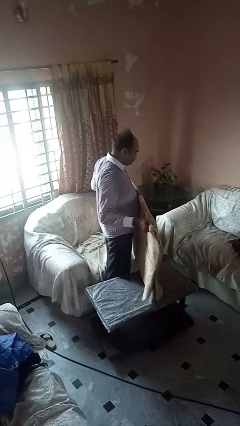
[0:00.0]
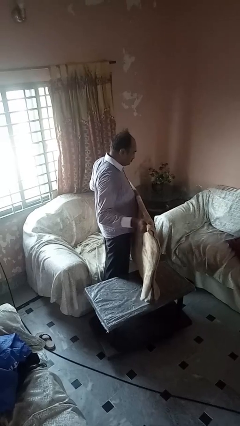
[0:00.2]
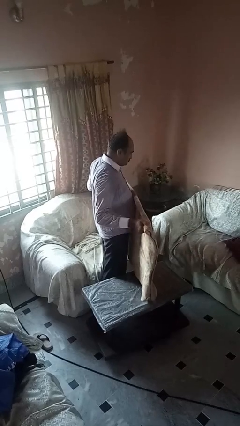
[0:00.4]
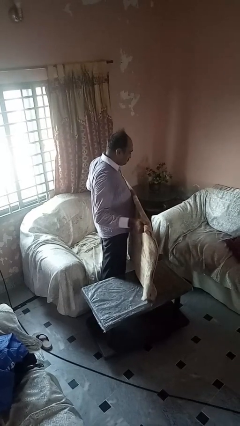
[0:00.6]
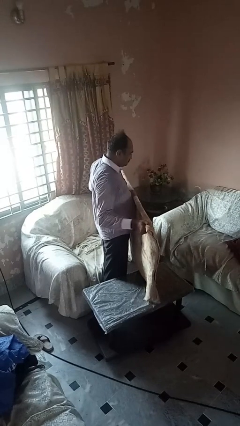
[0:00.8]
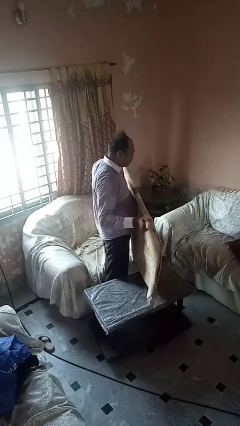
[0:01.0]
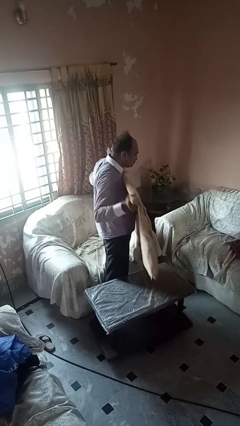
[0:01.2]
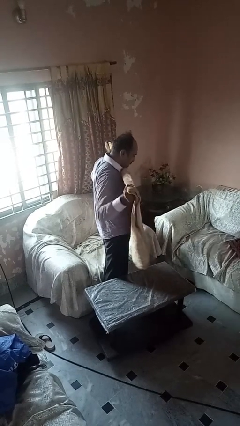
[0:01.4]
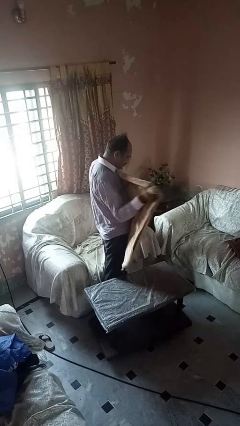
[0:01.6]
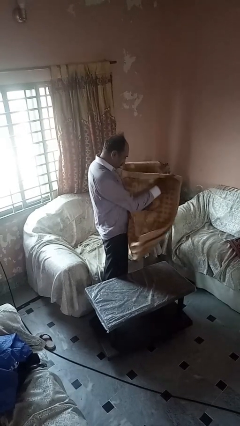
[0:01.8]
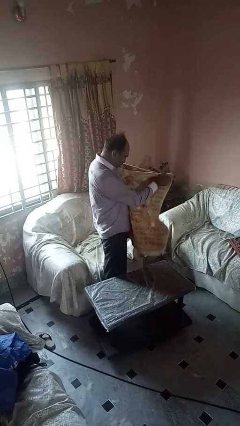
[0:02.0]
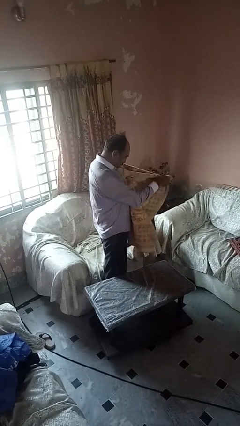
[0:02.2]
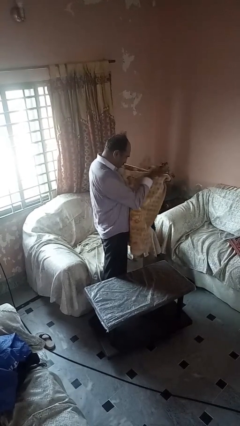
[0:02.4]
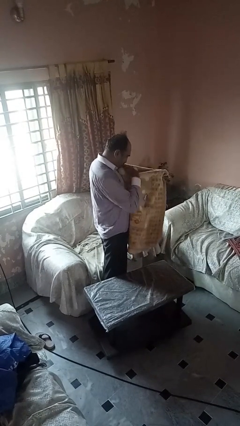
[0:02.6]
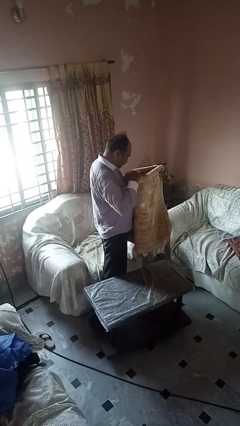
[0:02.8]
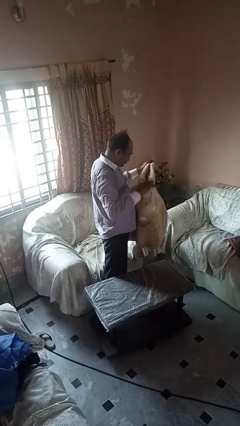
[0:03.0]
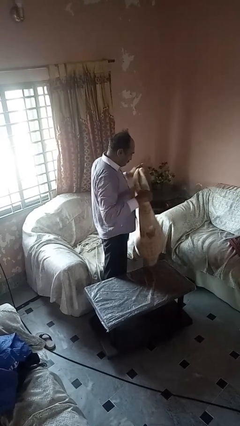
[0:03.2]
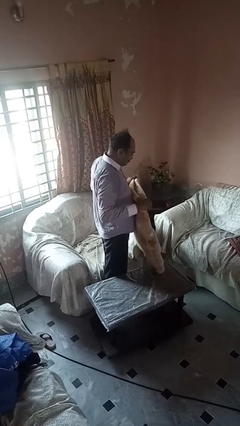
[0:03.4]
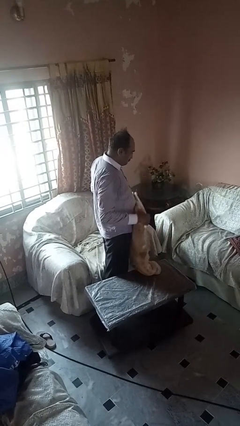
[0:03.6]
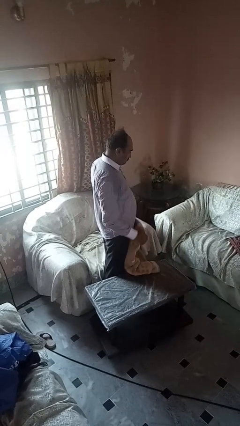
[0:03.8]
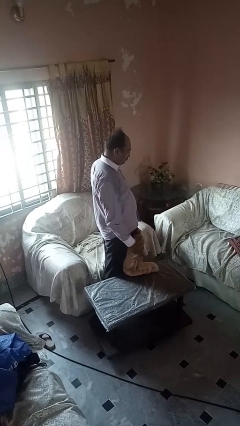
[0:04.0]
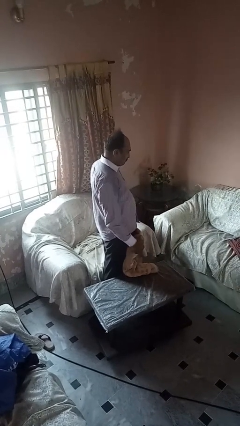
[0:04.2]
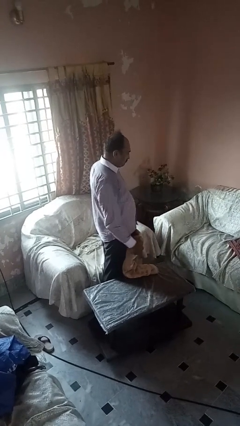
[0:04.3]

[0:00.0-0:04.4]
person folds blanket

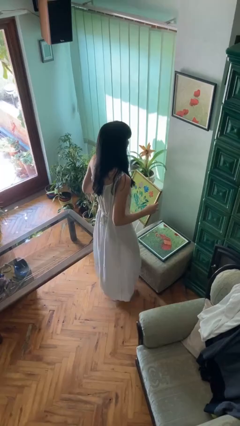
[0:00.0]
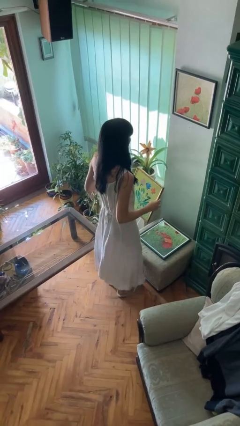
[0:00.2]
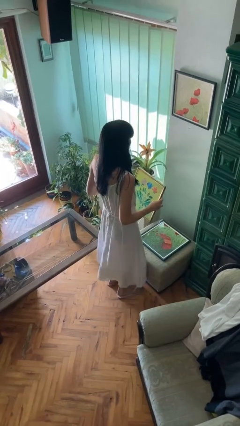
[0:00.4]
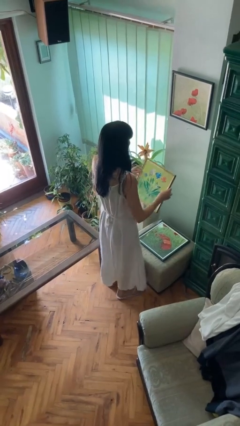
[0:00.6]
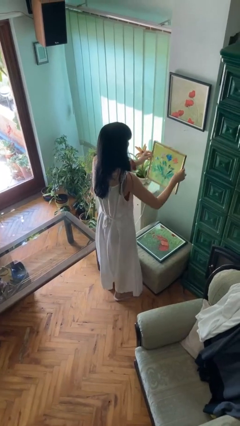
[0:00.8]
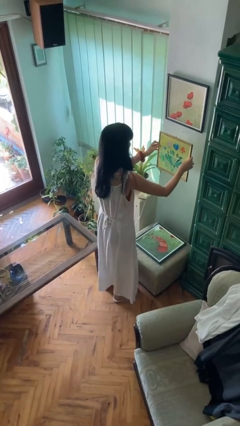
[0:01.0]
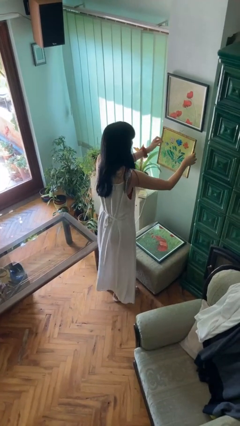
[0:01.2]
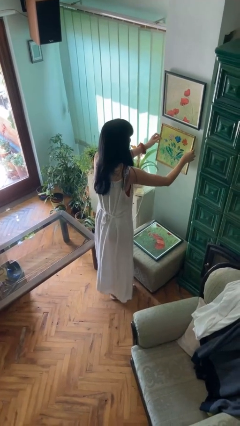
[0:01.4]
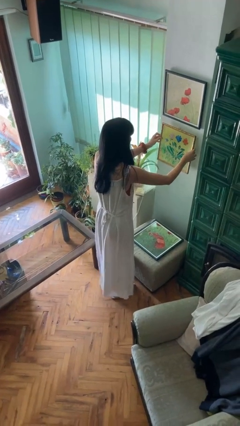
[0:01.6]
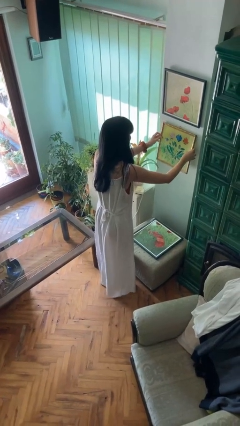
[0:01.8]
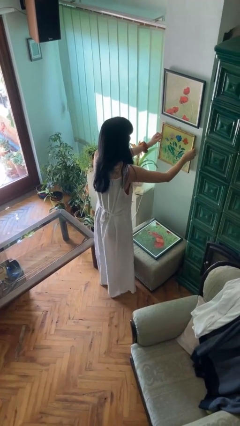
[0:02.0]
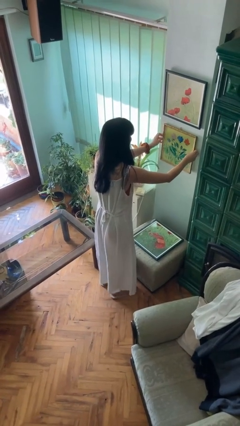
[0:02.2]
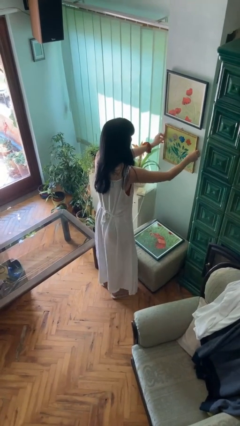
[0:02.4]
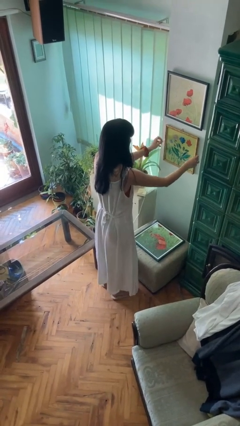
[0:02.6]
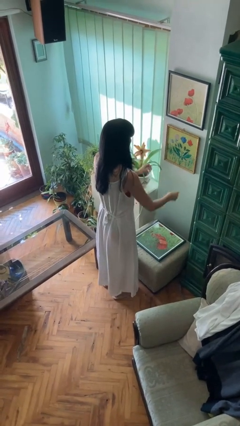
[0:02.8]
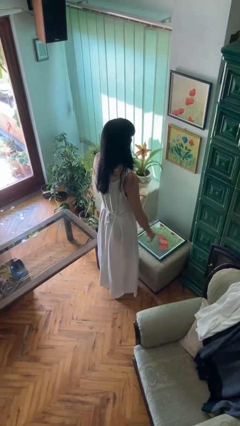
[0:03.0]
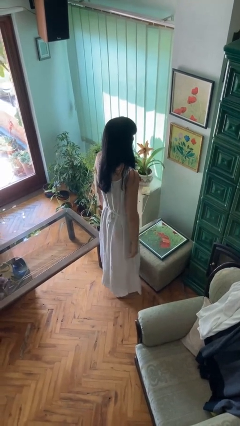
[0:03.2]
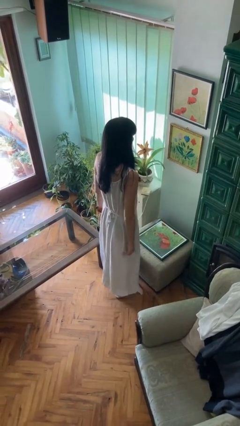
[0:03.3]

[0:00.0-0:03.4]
person puts up picture frame

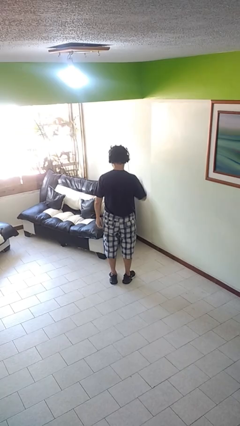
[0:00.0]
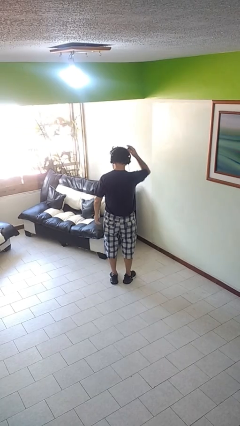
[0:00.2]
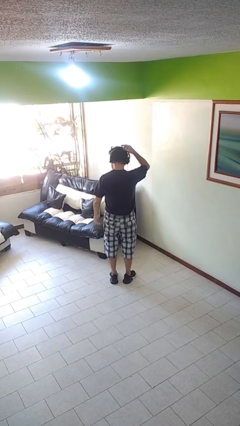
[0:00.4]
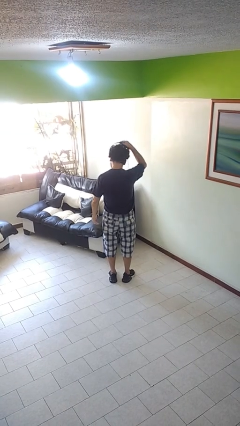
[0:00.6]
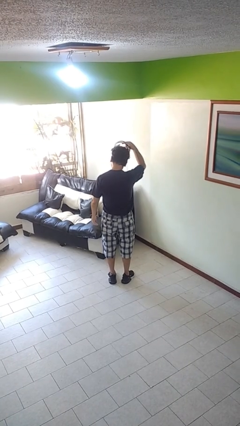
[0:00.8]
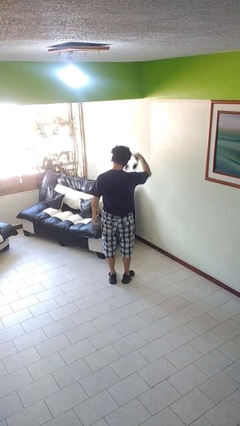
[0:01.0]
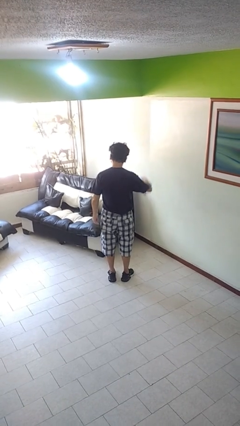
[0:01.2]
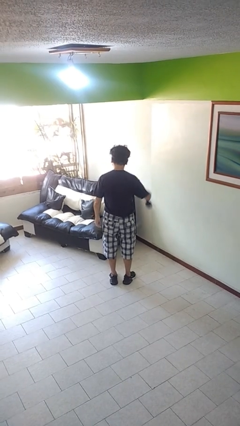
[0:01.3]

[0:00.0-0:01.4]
person takes off headphones

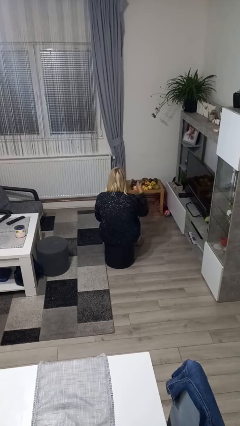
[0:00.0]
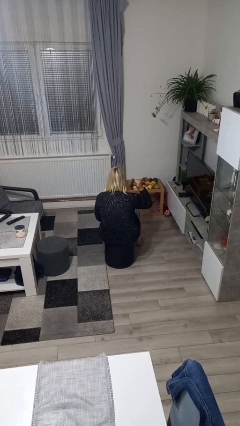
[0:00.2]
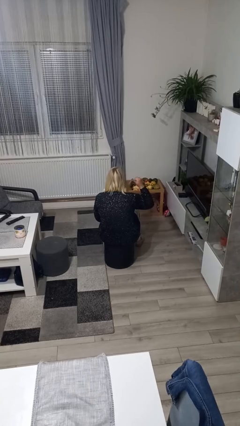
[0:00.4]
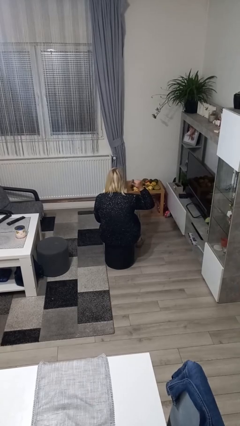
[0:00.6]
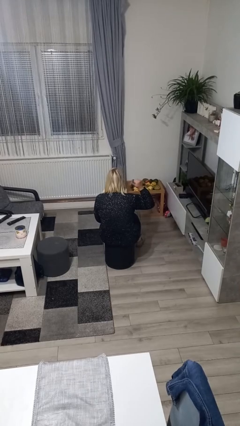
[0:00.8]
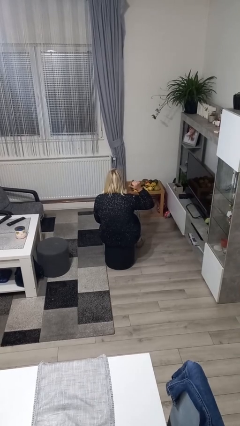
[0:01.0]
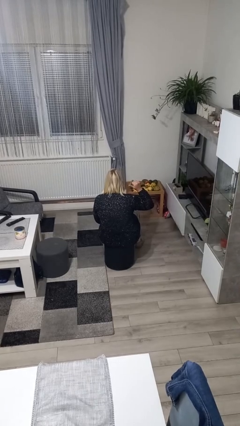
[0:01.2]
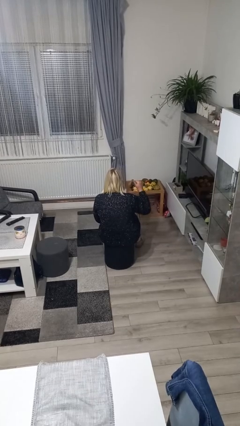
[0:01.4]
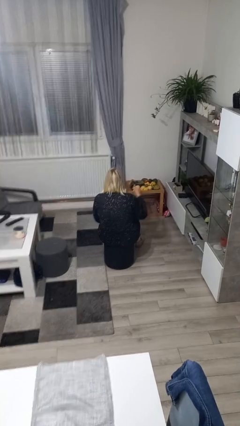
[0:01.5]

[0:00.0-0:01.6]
person gestures behind me

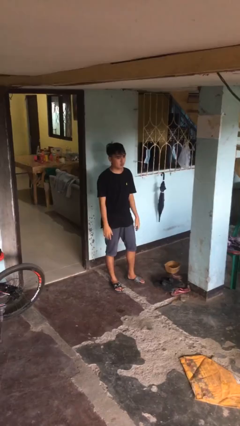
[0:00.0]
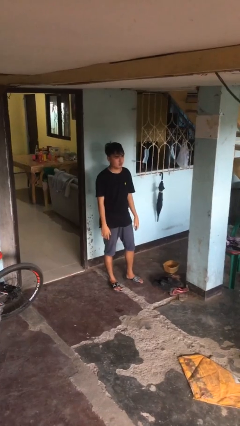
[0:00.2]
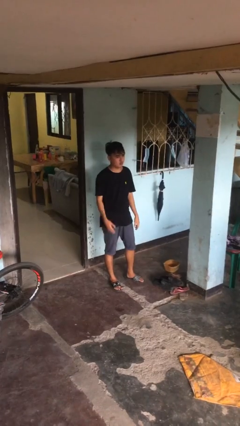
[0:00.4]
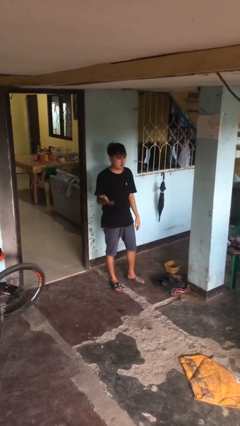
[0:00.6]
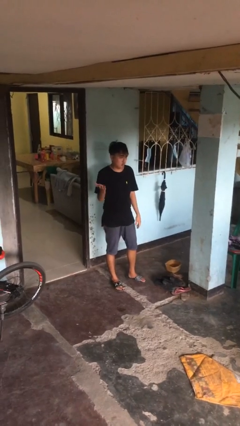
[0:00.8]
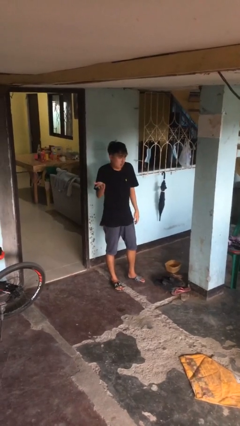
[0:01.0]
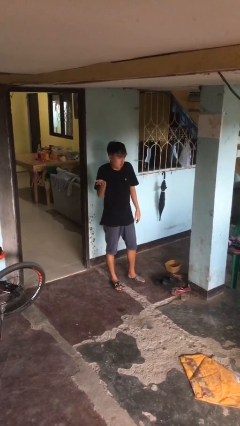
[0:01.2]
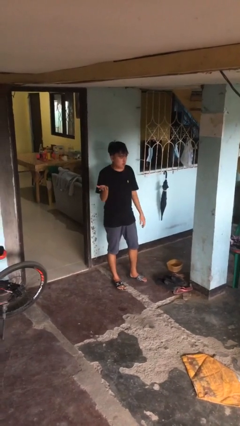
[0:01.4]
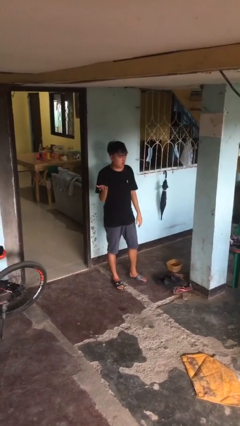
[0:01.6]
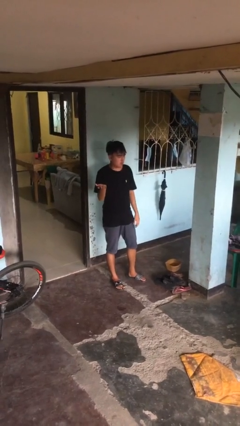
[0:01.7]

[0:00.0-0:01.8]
person shrugs

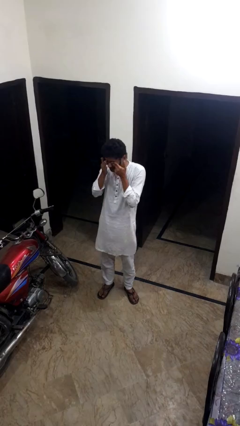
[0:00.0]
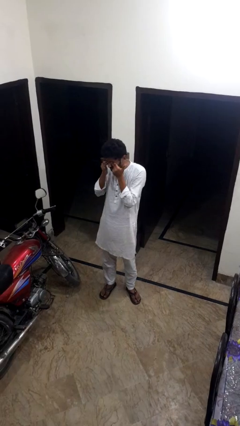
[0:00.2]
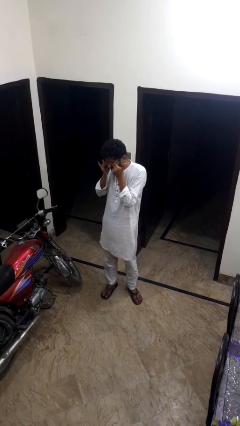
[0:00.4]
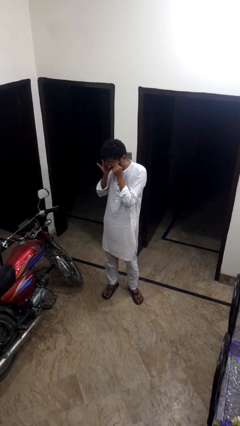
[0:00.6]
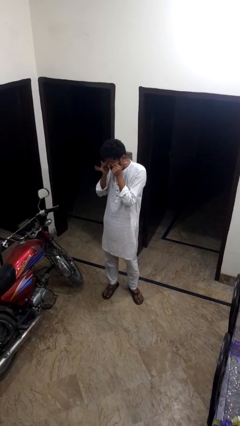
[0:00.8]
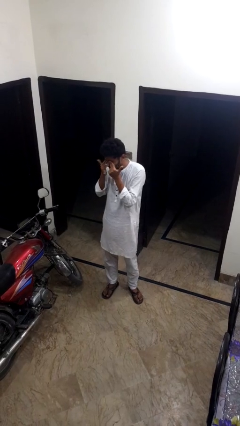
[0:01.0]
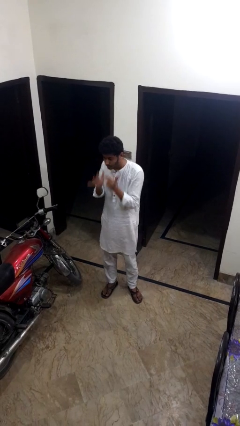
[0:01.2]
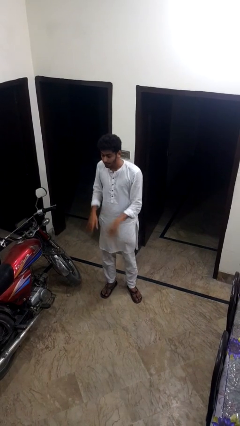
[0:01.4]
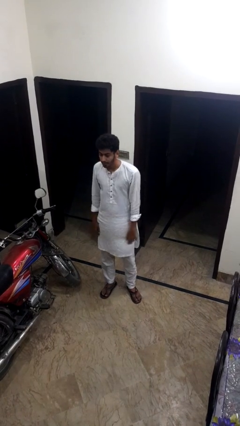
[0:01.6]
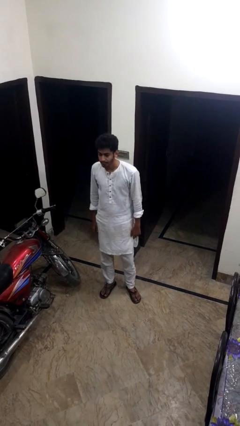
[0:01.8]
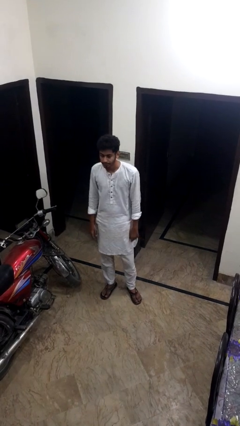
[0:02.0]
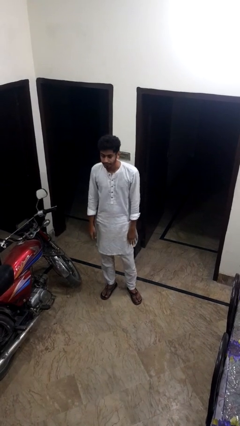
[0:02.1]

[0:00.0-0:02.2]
person rubs eyes

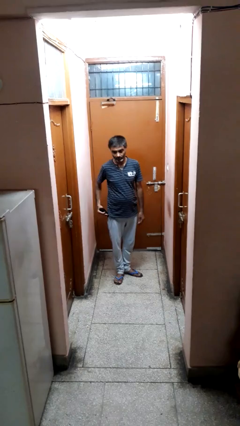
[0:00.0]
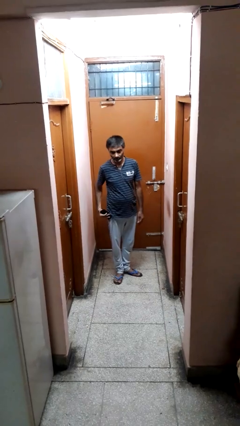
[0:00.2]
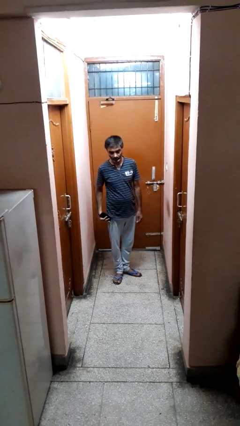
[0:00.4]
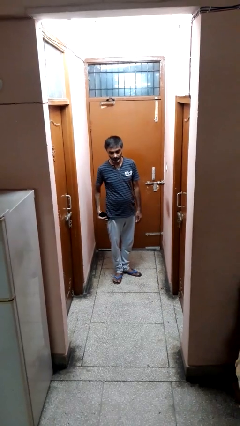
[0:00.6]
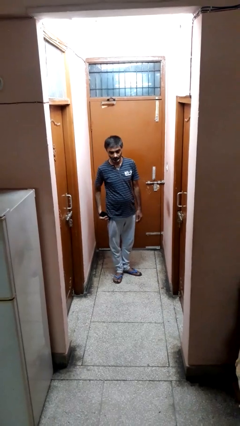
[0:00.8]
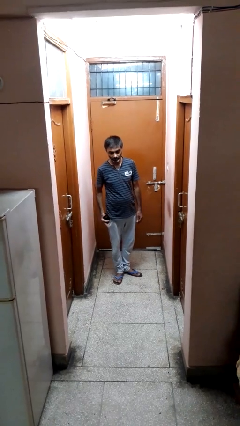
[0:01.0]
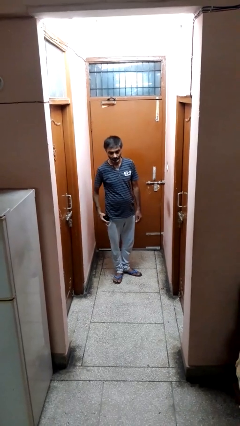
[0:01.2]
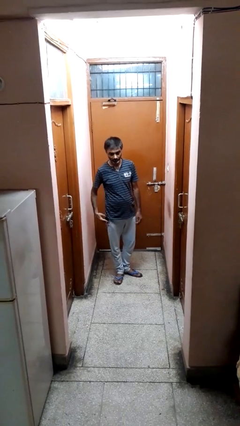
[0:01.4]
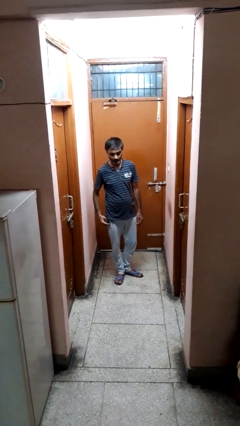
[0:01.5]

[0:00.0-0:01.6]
person puts phone into pocket

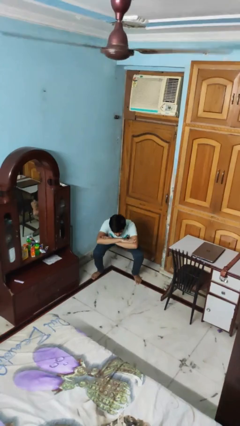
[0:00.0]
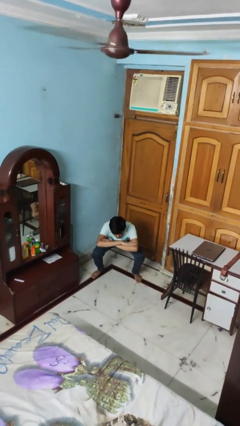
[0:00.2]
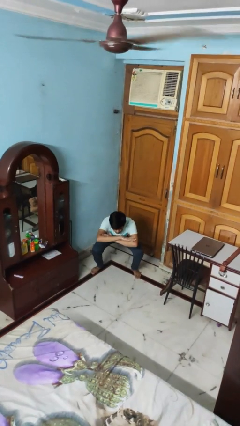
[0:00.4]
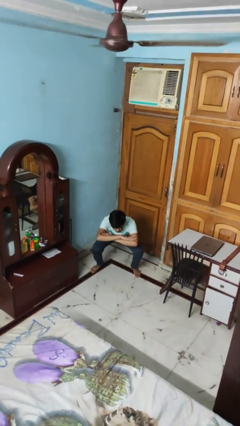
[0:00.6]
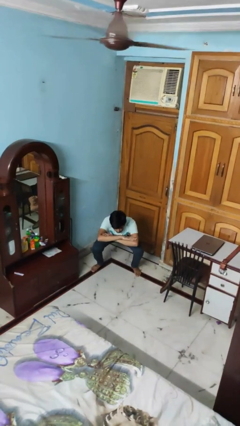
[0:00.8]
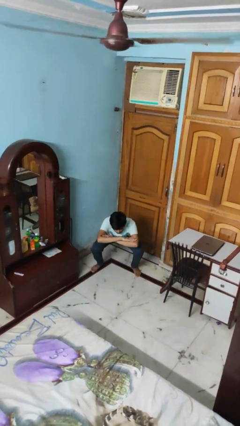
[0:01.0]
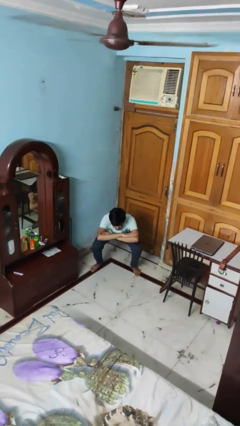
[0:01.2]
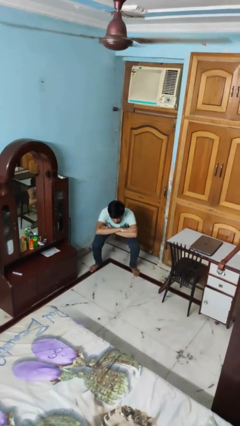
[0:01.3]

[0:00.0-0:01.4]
person squats
